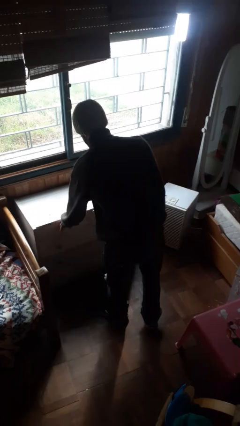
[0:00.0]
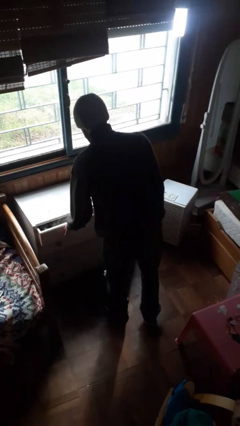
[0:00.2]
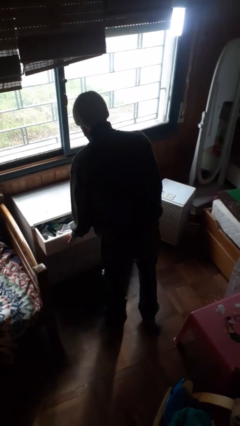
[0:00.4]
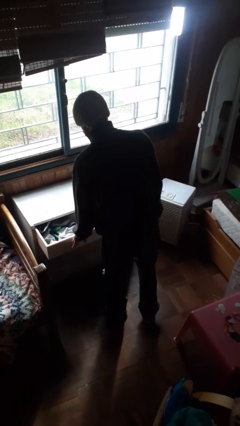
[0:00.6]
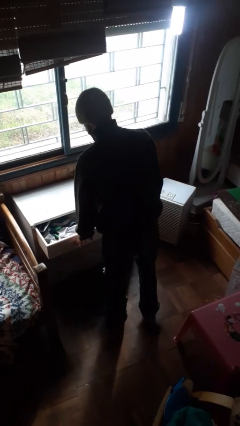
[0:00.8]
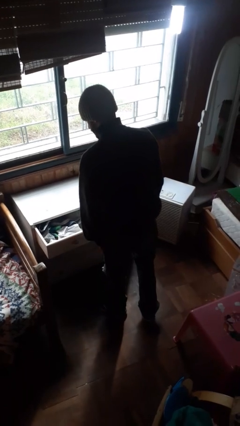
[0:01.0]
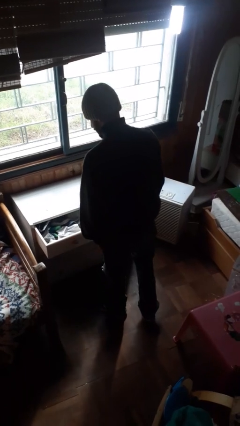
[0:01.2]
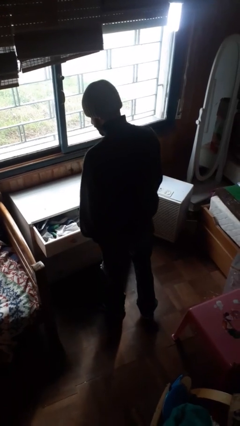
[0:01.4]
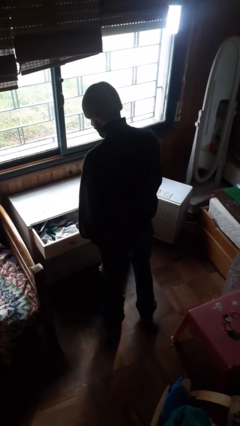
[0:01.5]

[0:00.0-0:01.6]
person opens dresser drawer

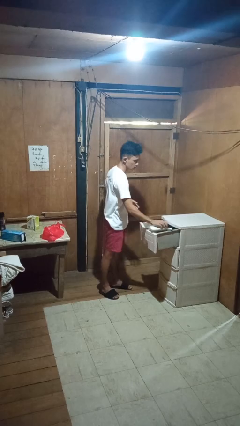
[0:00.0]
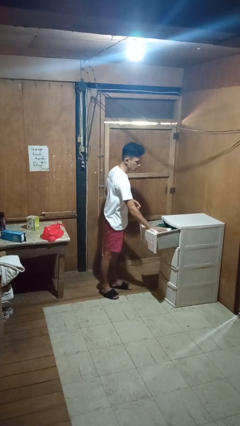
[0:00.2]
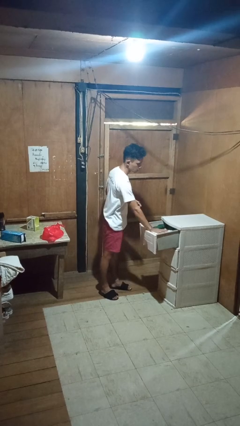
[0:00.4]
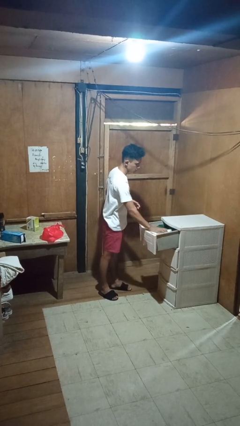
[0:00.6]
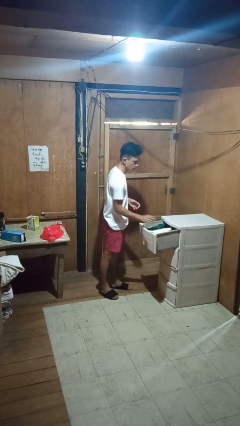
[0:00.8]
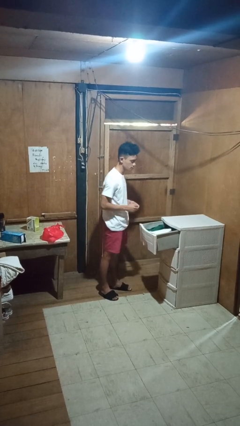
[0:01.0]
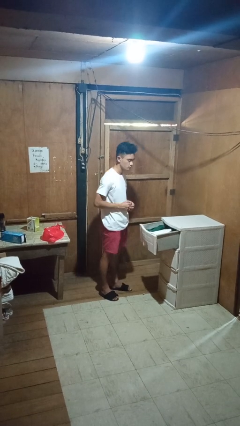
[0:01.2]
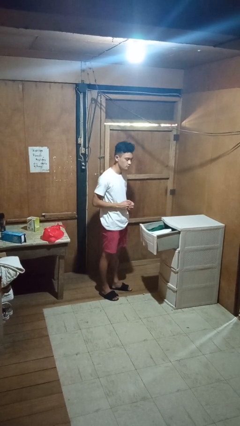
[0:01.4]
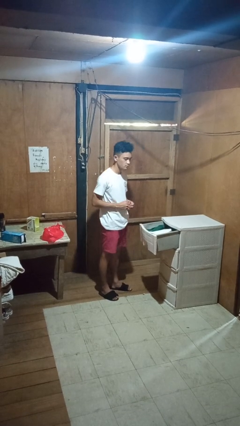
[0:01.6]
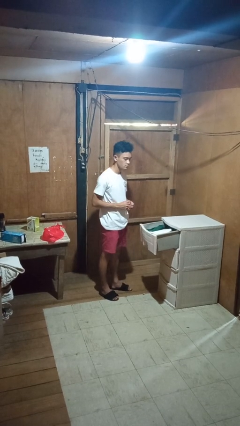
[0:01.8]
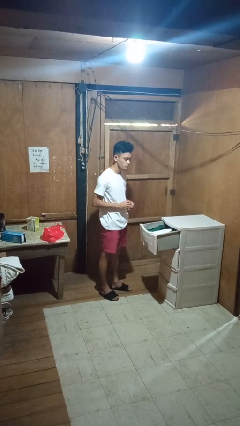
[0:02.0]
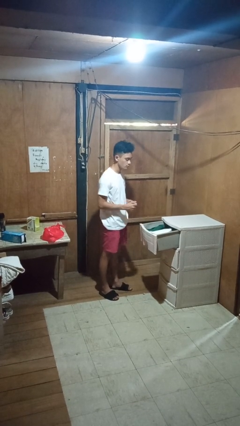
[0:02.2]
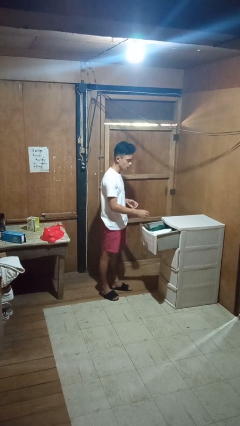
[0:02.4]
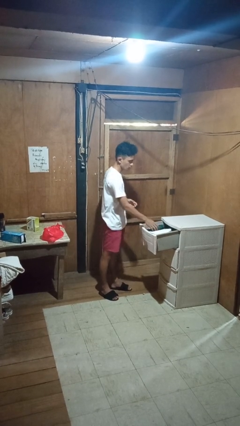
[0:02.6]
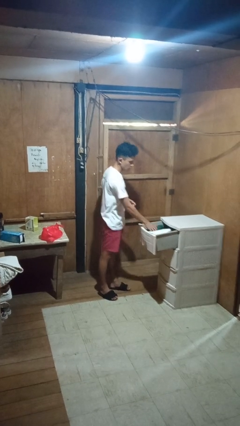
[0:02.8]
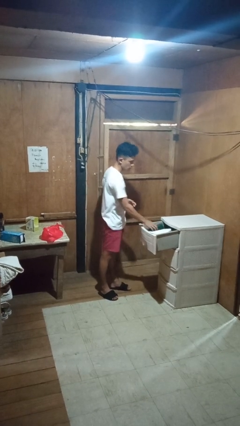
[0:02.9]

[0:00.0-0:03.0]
person puts clothes into dresser

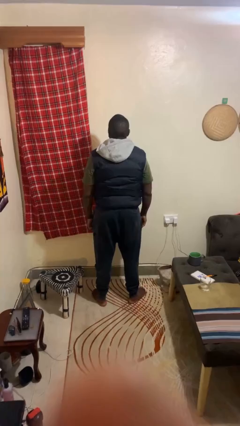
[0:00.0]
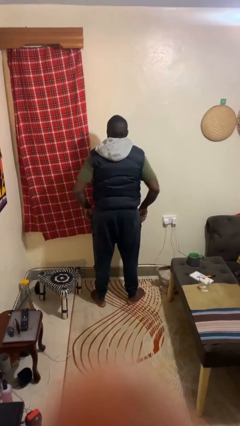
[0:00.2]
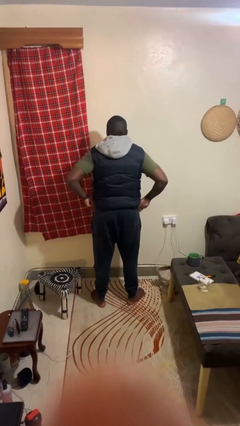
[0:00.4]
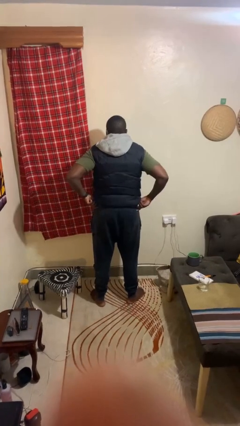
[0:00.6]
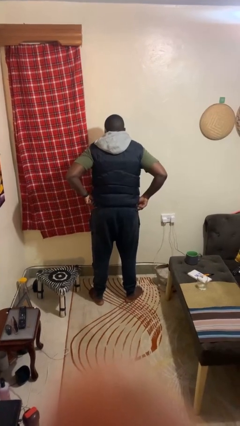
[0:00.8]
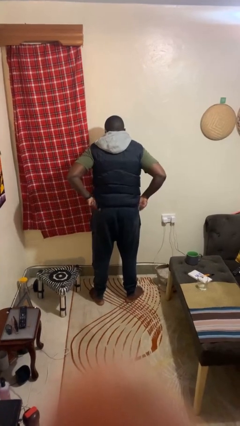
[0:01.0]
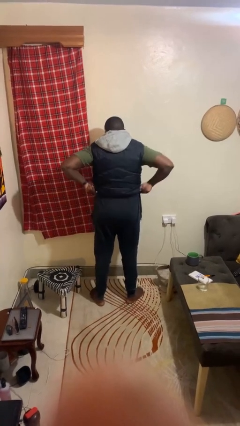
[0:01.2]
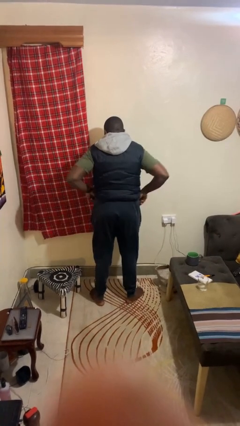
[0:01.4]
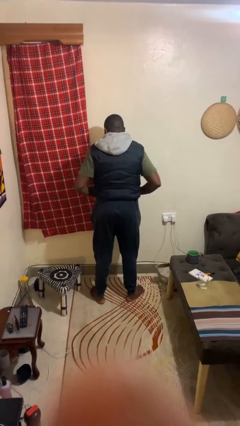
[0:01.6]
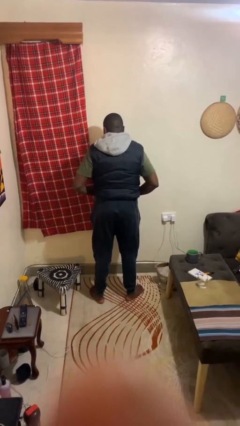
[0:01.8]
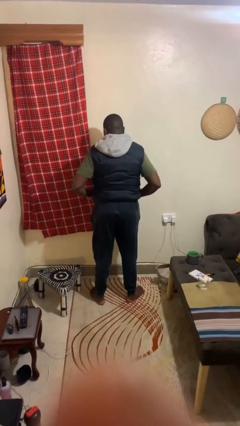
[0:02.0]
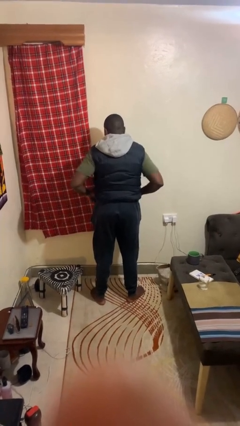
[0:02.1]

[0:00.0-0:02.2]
person hikes up pants

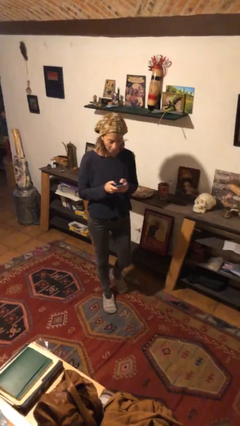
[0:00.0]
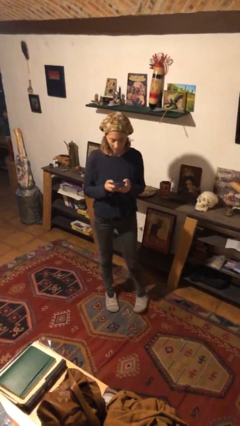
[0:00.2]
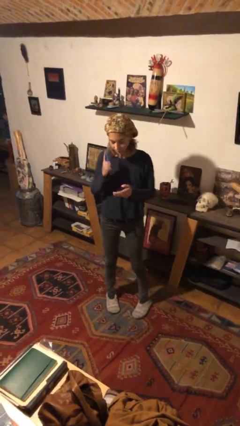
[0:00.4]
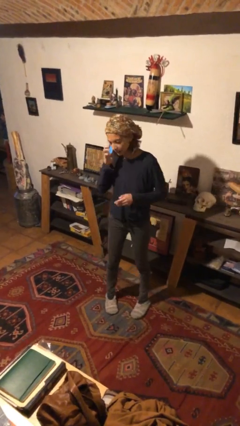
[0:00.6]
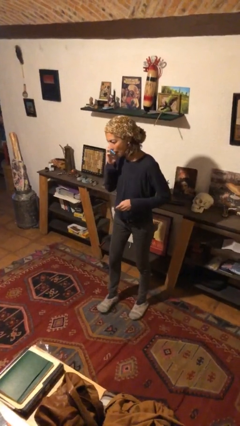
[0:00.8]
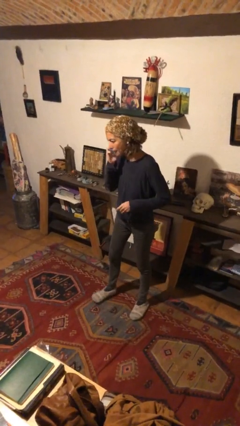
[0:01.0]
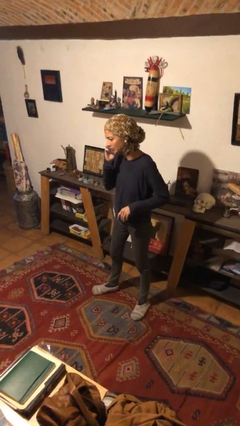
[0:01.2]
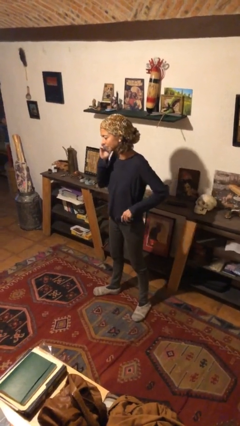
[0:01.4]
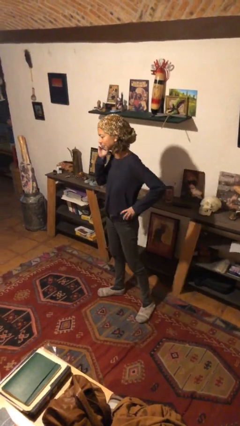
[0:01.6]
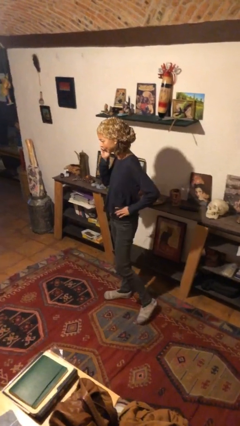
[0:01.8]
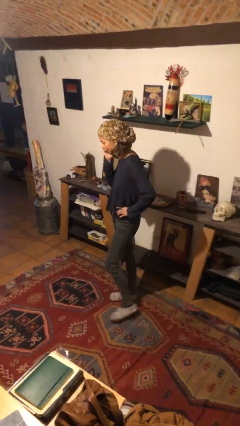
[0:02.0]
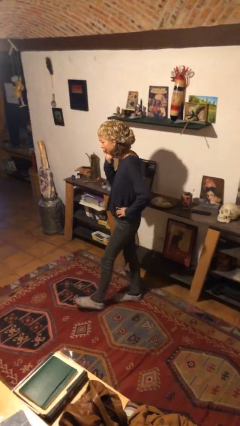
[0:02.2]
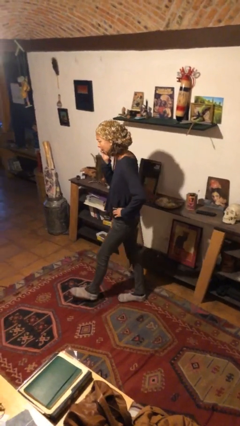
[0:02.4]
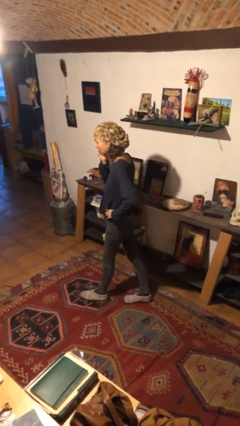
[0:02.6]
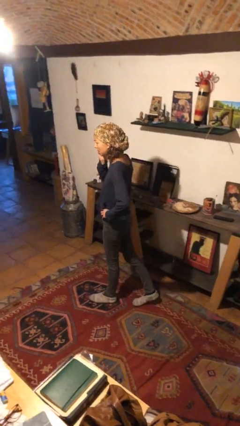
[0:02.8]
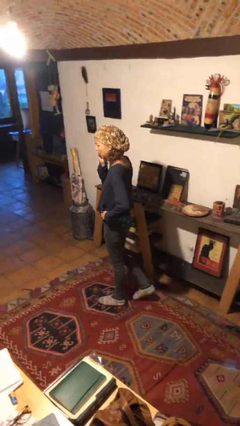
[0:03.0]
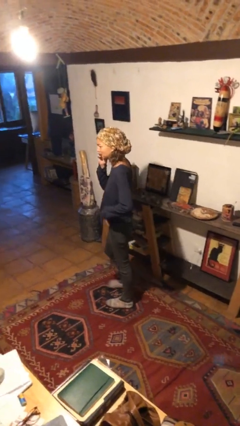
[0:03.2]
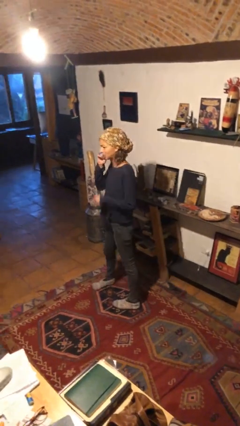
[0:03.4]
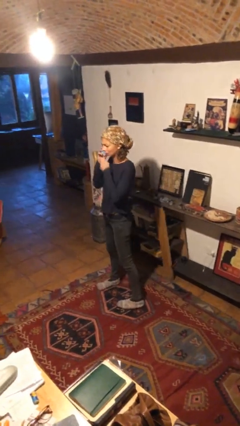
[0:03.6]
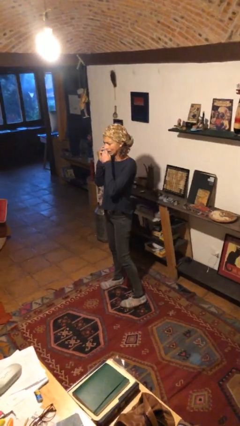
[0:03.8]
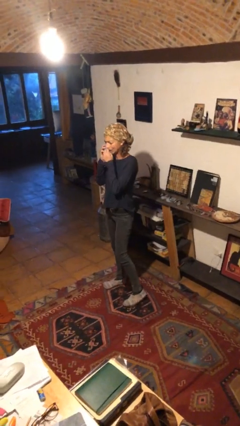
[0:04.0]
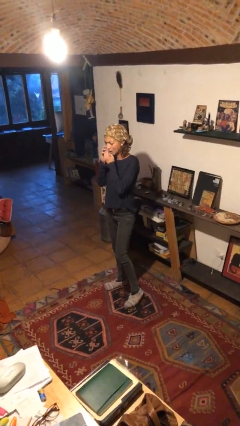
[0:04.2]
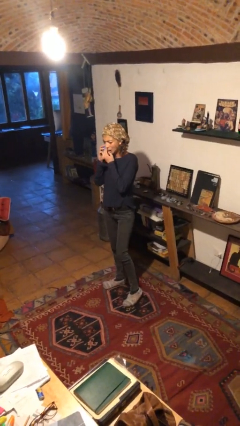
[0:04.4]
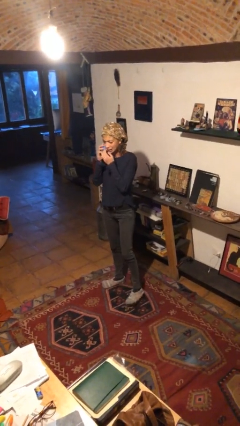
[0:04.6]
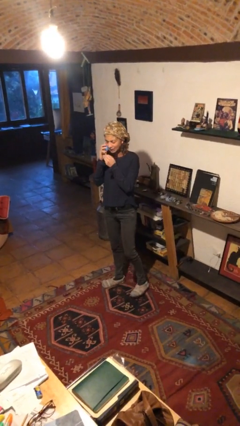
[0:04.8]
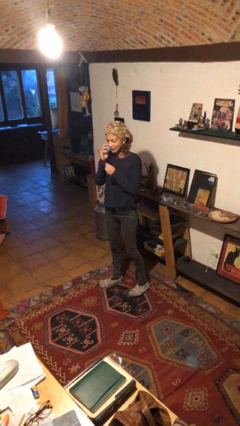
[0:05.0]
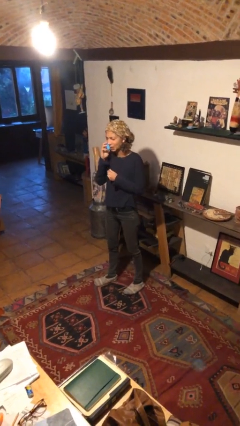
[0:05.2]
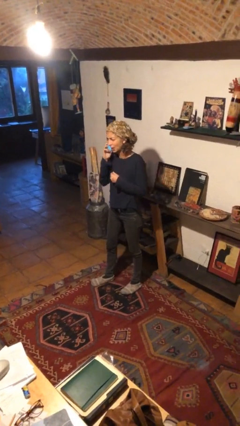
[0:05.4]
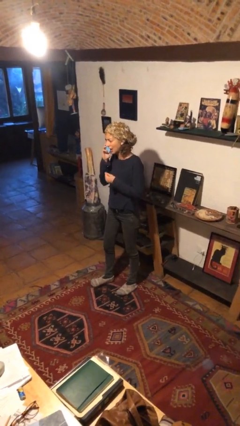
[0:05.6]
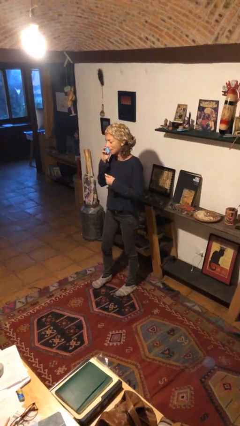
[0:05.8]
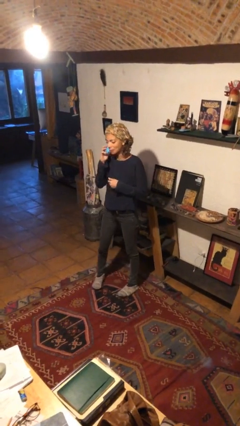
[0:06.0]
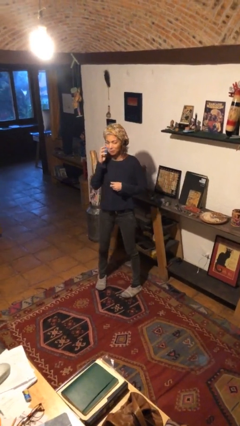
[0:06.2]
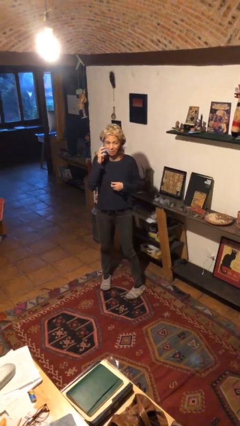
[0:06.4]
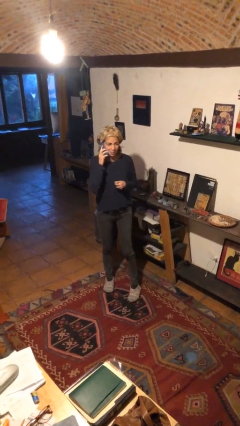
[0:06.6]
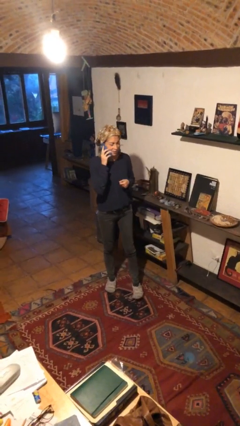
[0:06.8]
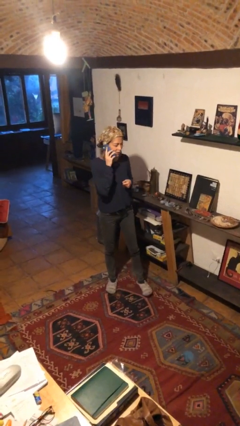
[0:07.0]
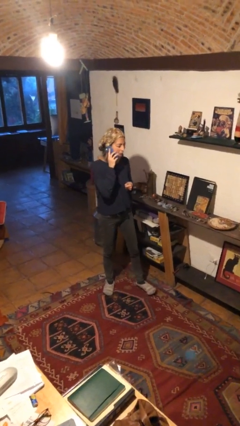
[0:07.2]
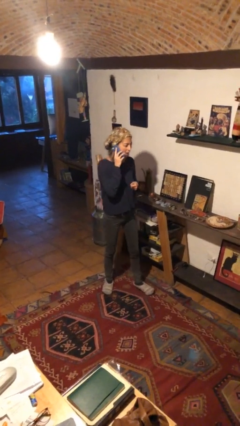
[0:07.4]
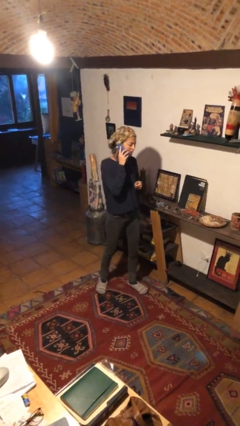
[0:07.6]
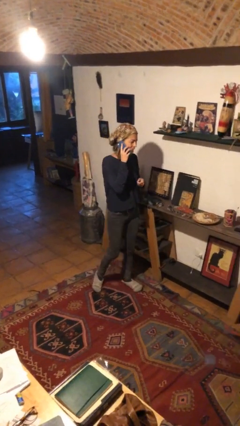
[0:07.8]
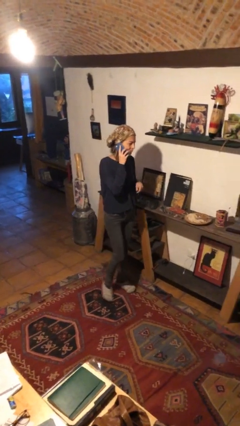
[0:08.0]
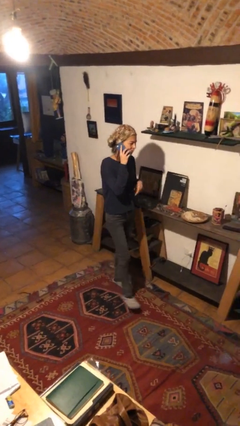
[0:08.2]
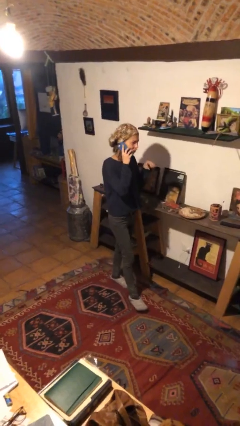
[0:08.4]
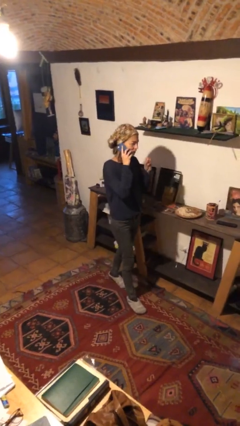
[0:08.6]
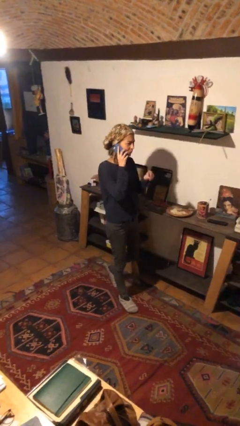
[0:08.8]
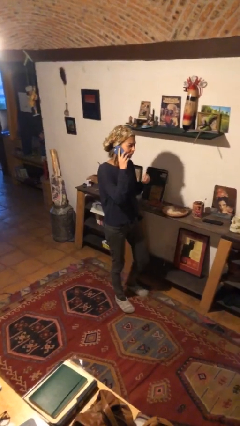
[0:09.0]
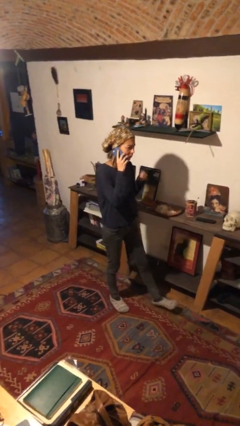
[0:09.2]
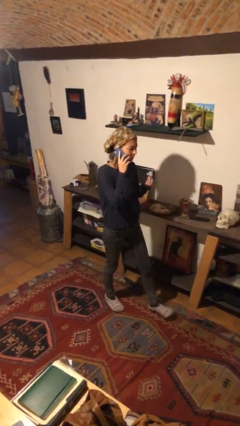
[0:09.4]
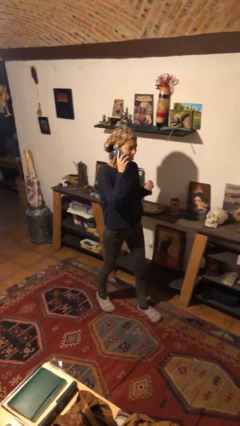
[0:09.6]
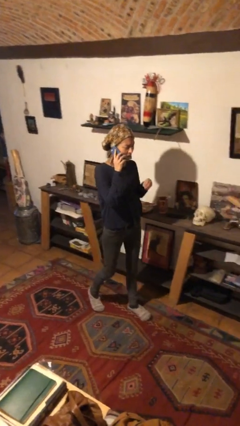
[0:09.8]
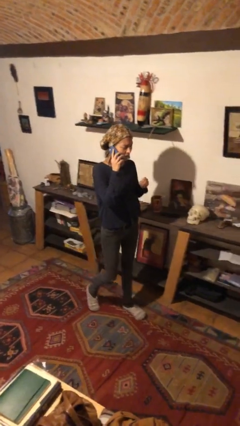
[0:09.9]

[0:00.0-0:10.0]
person talks on phone

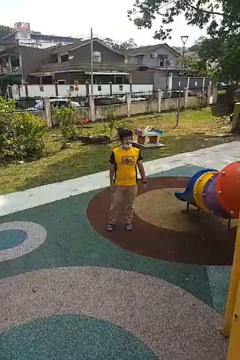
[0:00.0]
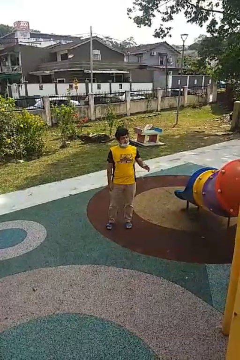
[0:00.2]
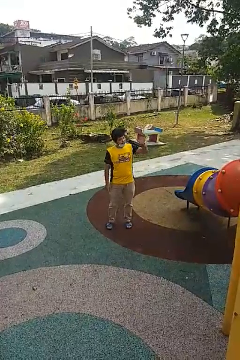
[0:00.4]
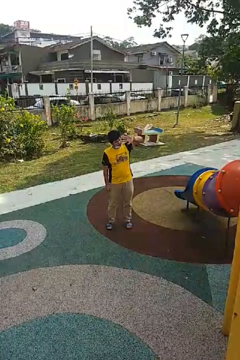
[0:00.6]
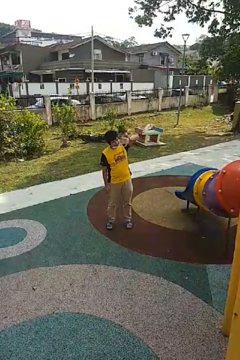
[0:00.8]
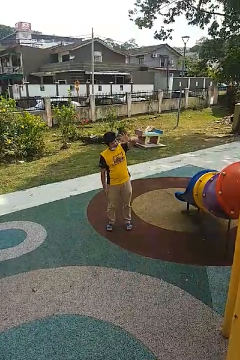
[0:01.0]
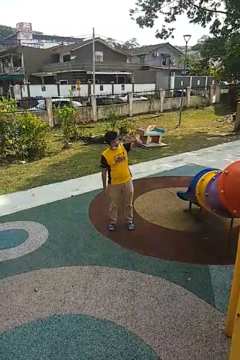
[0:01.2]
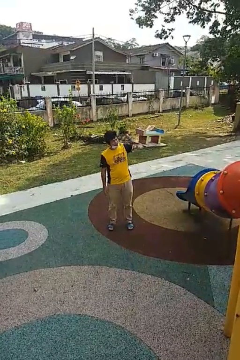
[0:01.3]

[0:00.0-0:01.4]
person waves at person
